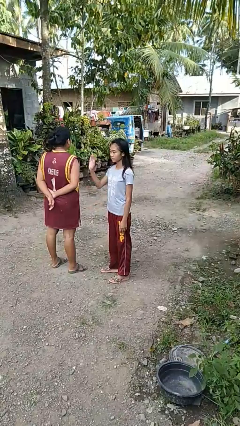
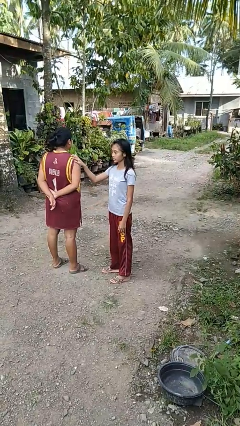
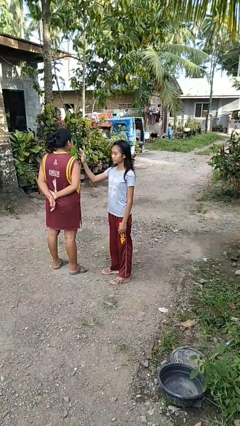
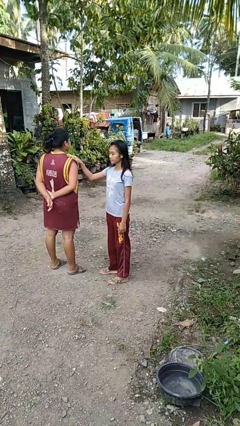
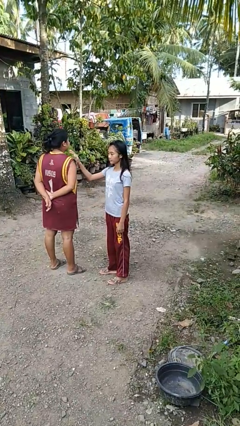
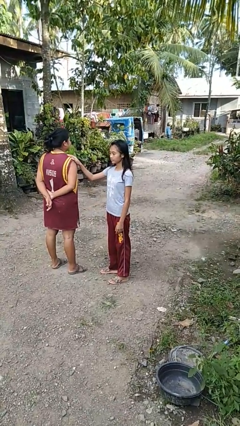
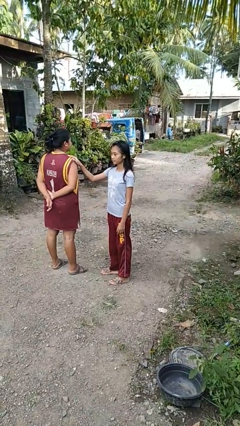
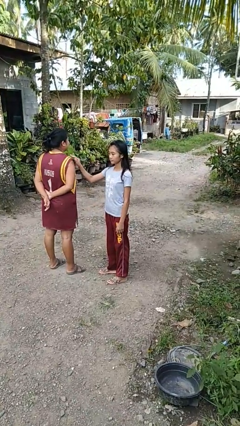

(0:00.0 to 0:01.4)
person pounds shoulders of person

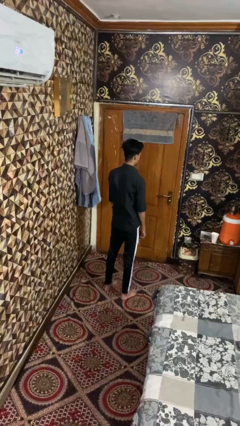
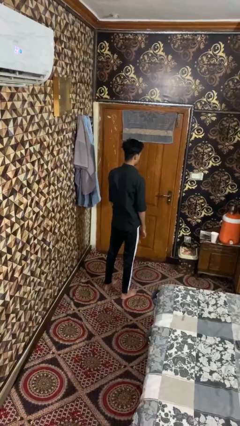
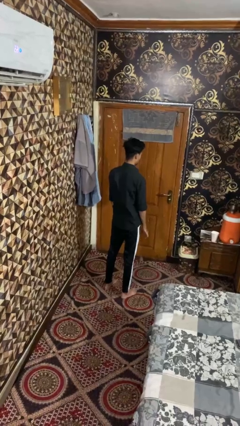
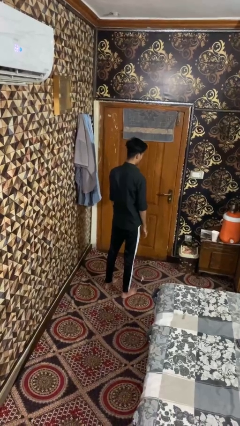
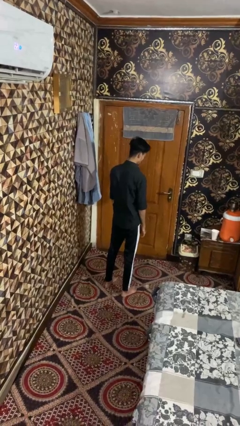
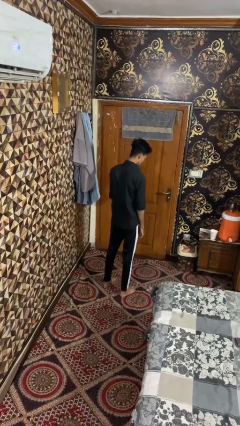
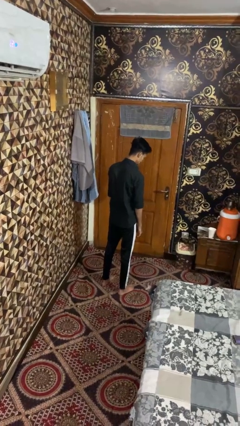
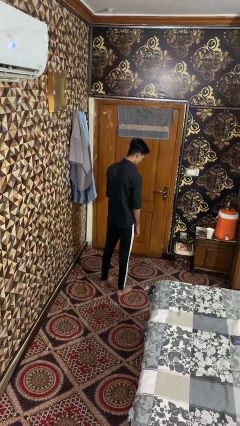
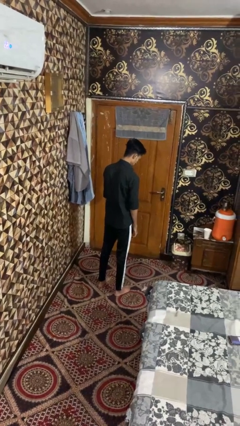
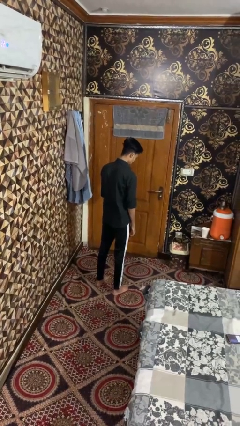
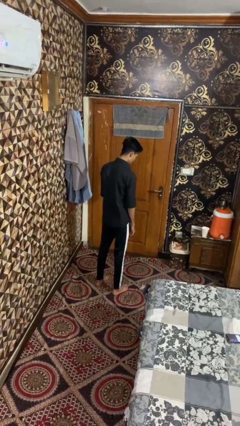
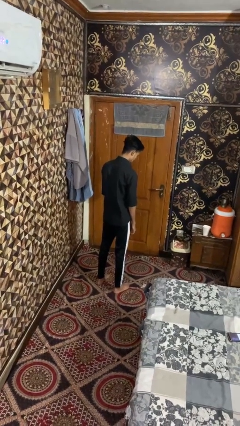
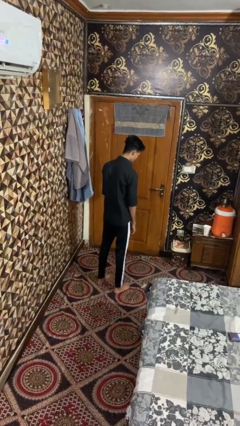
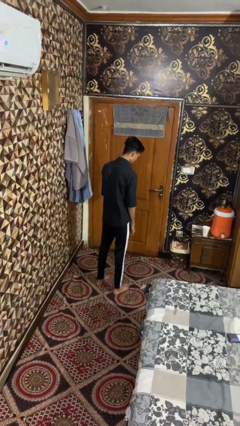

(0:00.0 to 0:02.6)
person drops object

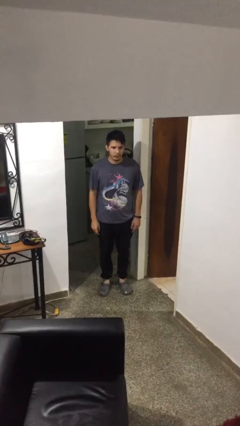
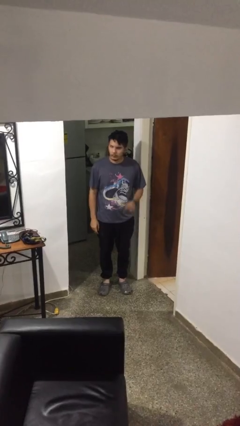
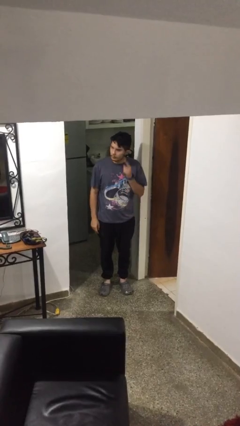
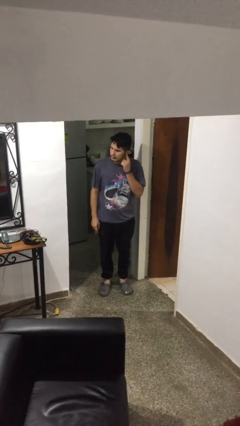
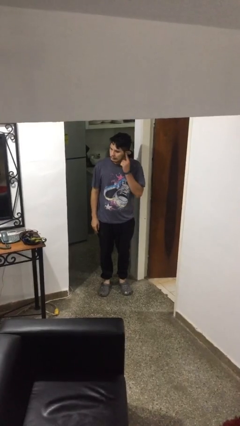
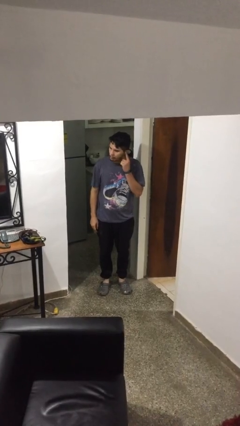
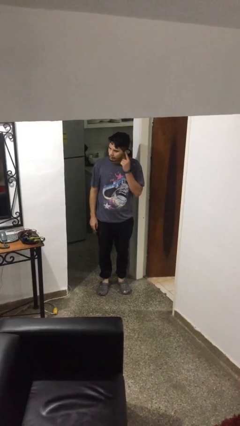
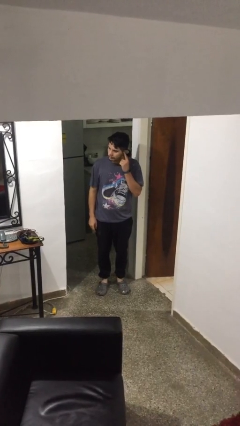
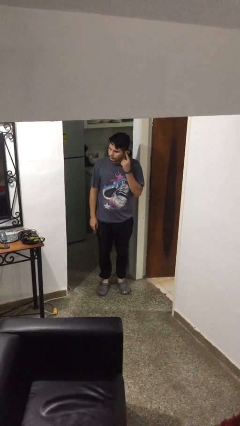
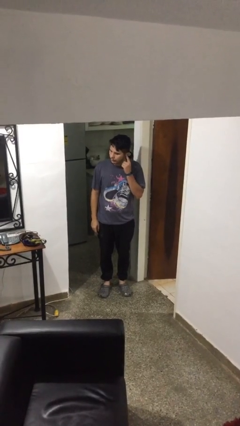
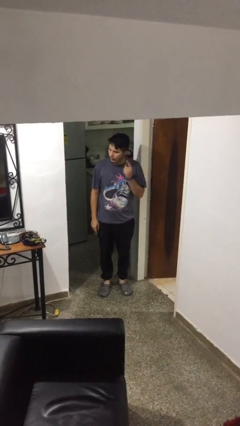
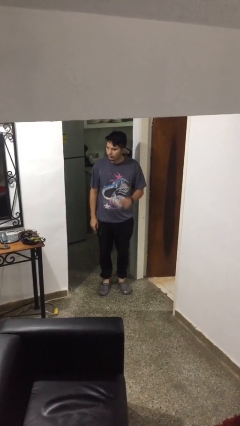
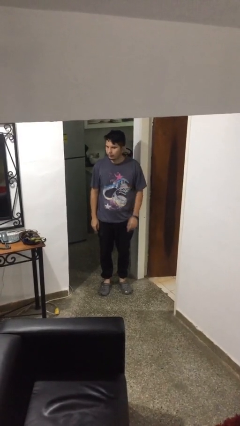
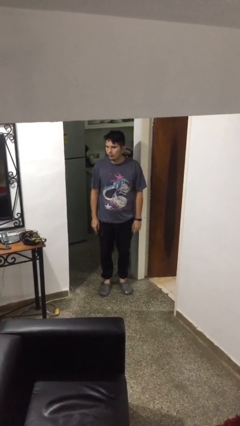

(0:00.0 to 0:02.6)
person gestures listen closely

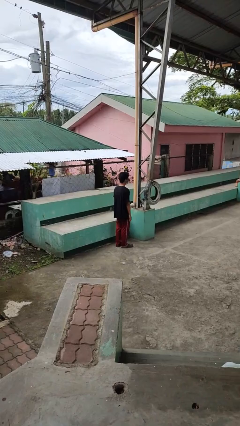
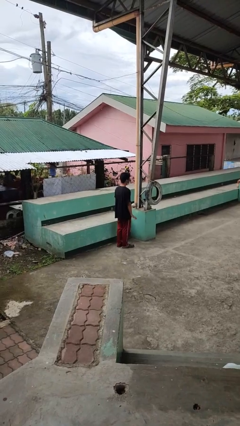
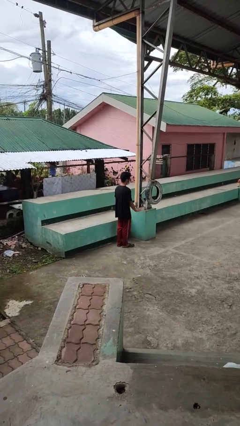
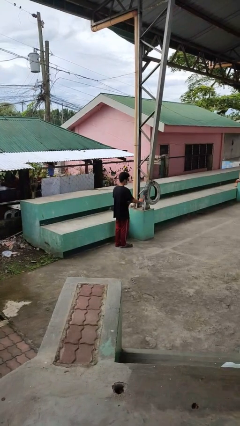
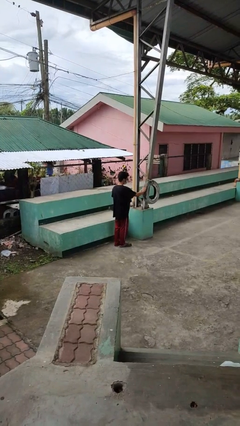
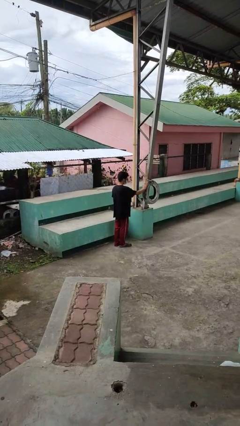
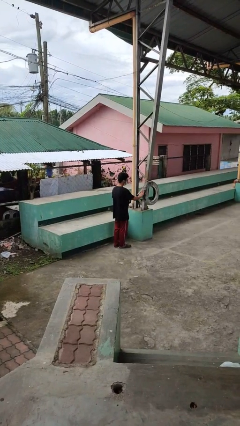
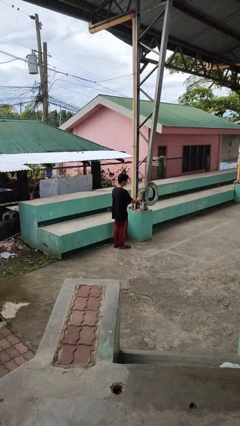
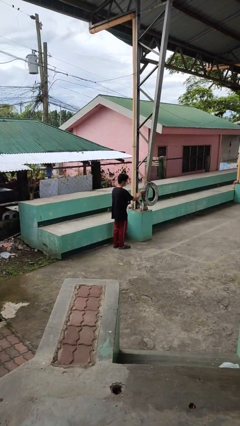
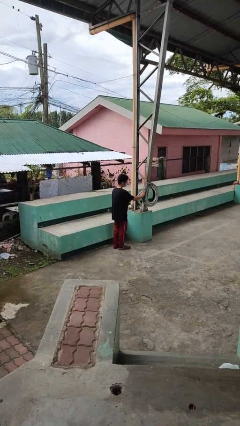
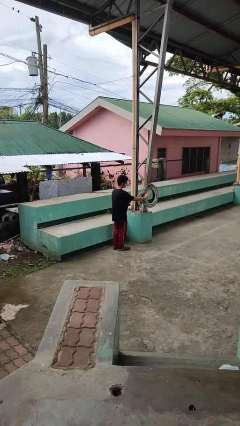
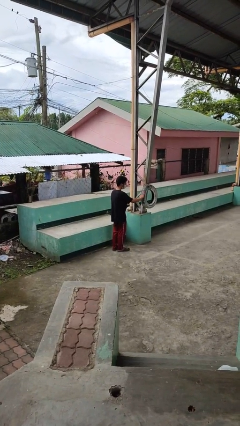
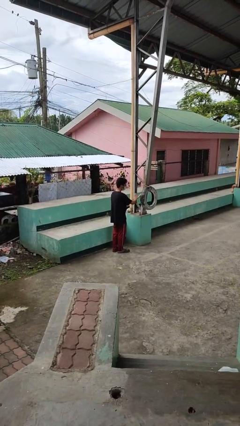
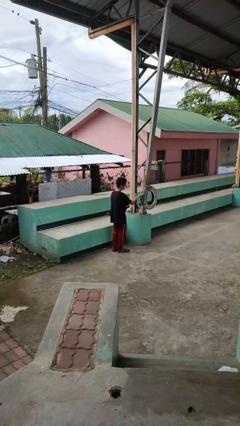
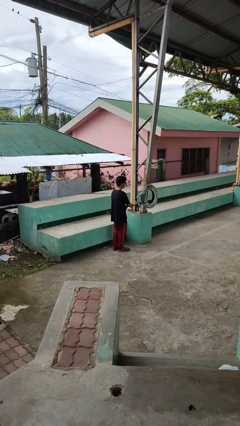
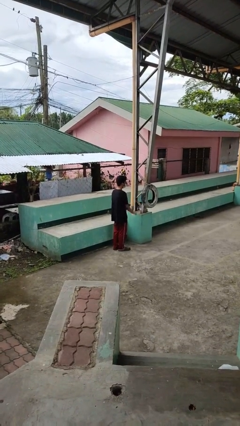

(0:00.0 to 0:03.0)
person waves hand over object

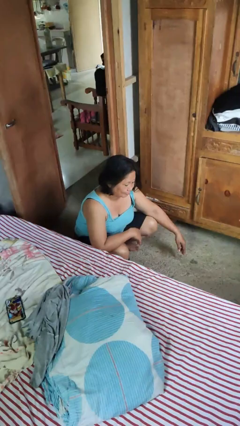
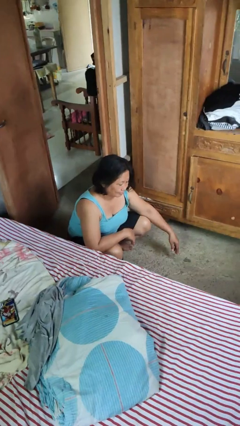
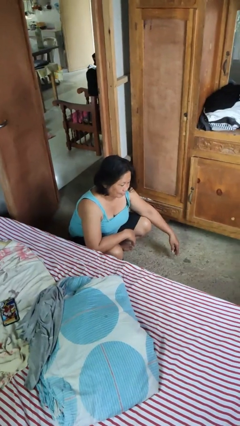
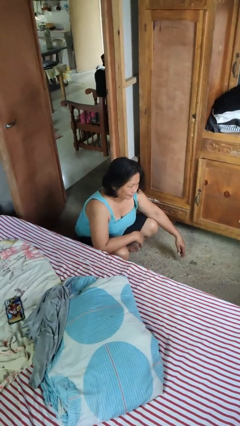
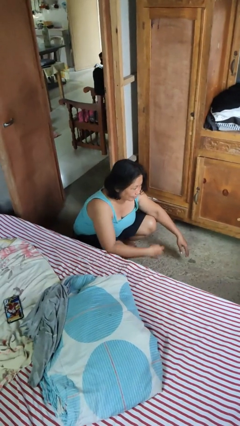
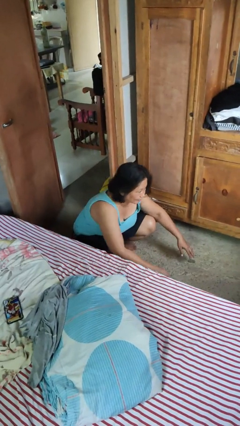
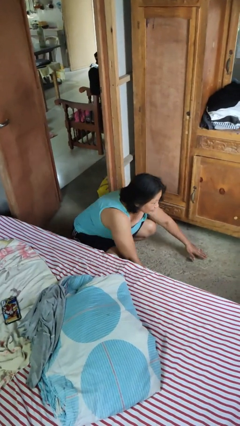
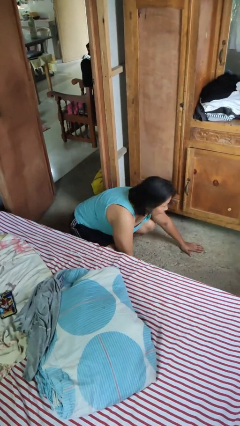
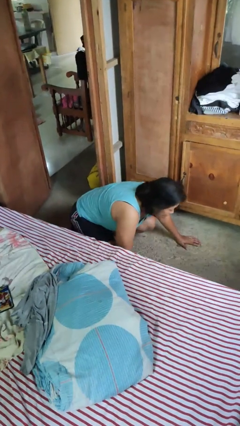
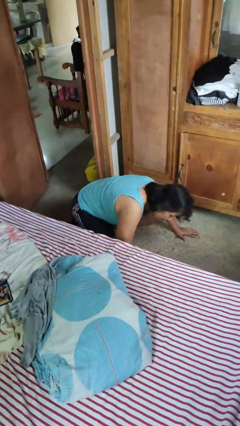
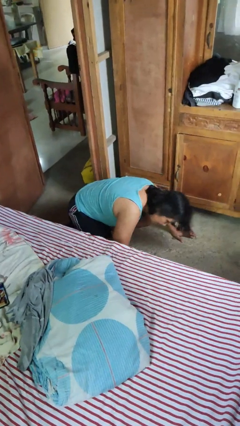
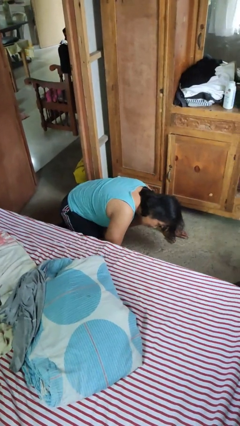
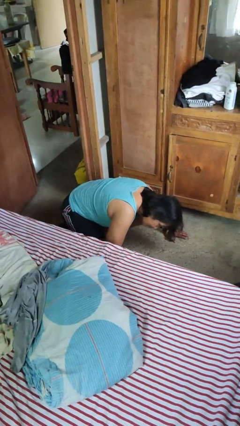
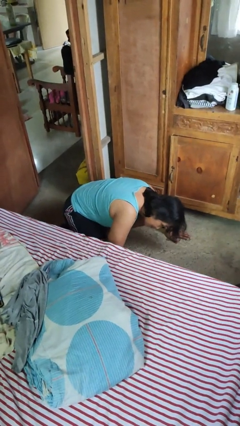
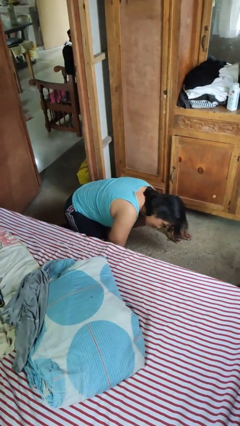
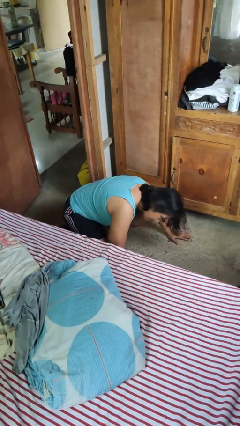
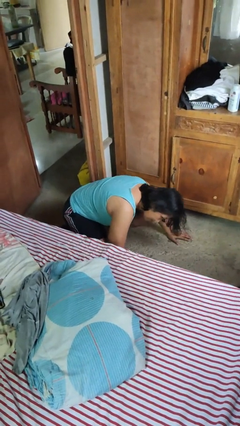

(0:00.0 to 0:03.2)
person searches under bed

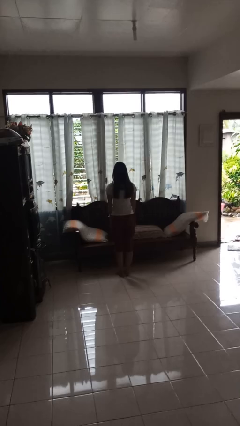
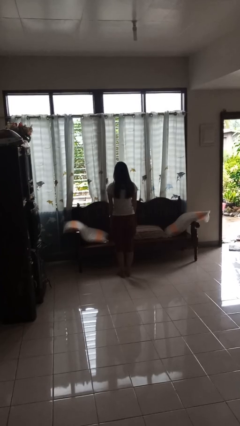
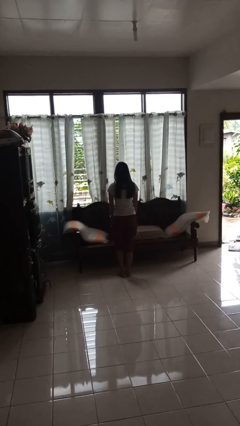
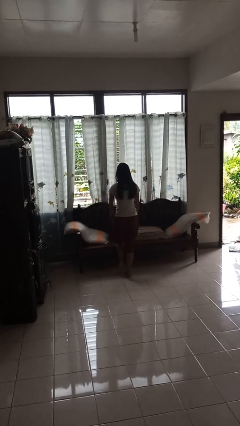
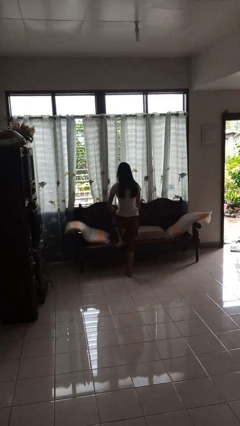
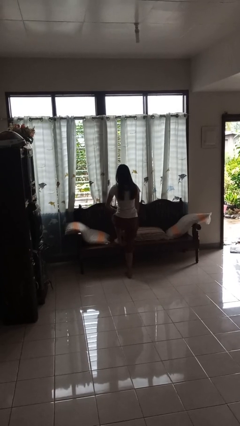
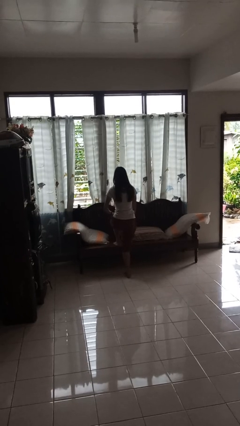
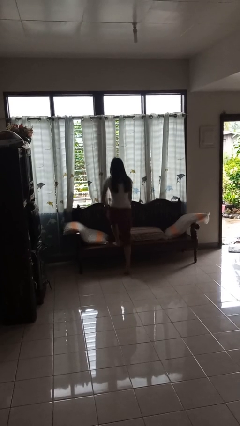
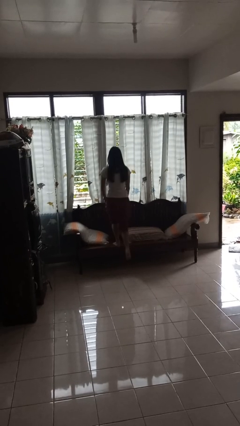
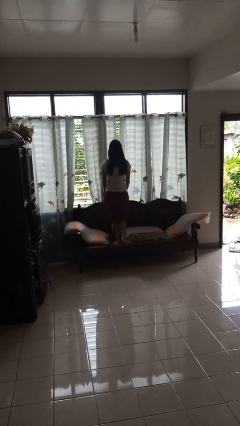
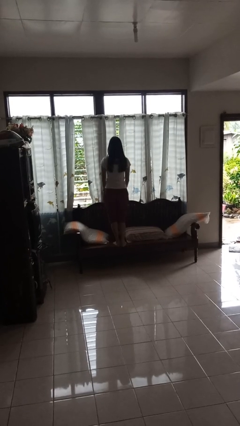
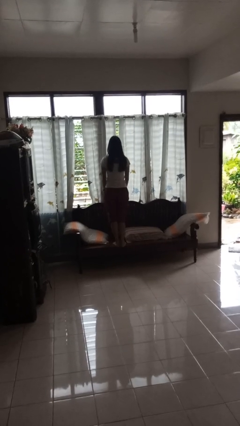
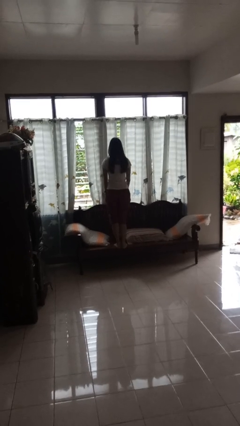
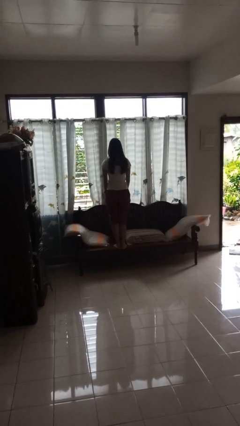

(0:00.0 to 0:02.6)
person climbs on couch

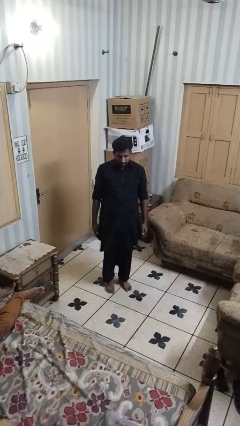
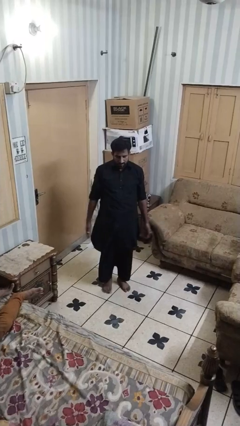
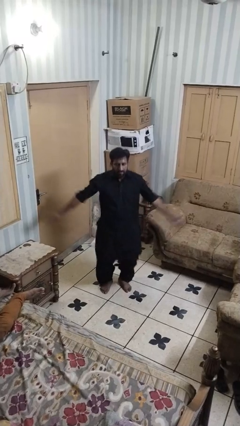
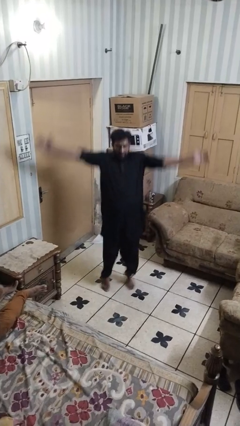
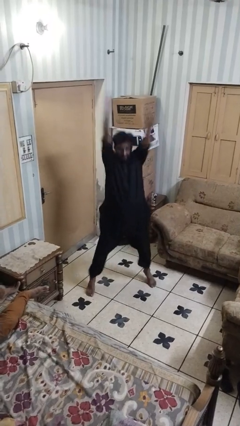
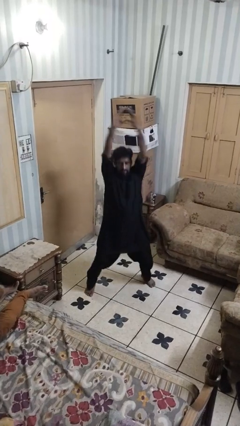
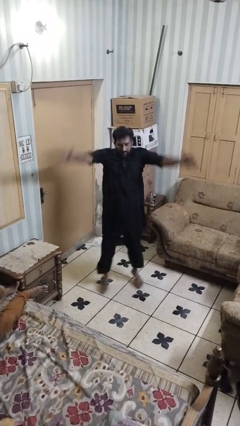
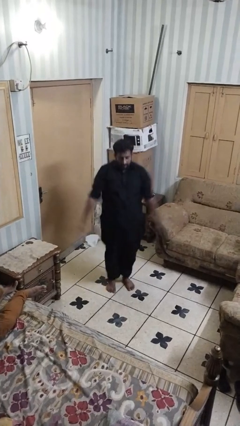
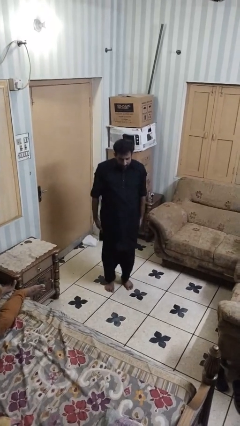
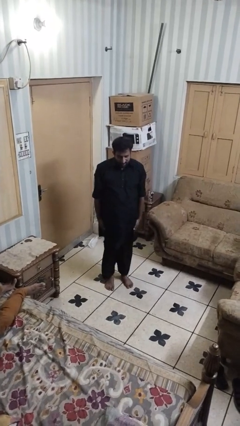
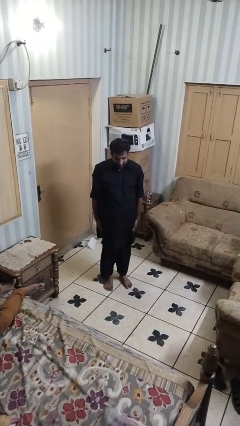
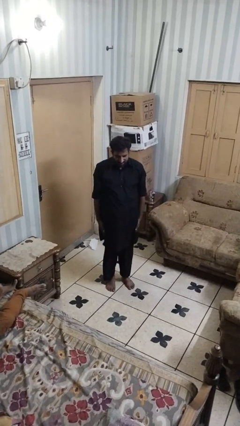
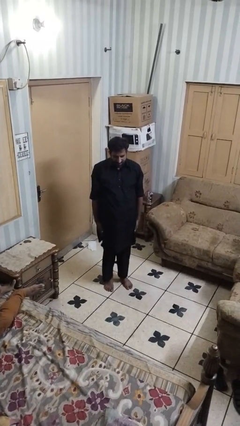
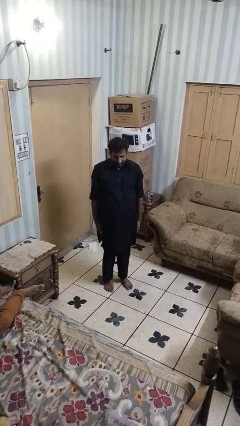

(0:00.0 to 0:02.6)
person exercises with jumping jacks
